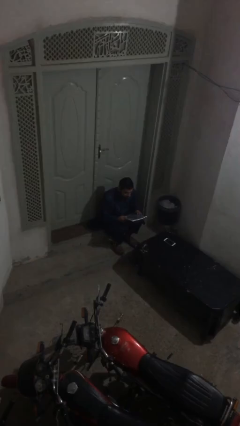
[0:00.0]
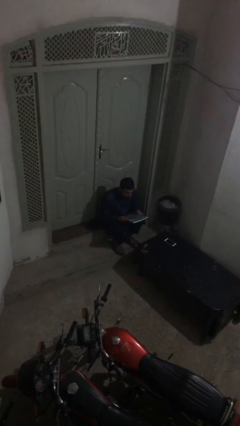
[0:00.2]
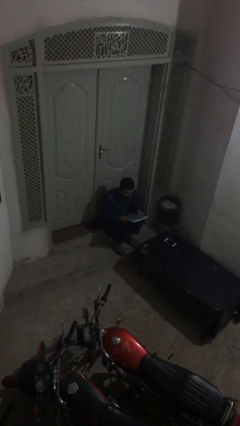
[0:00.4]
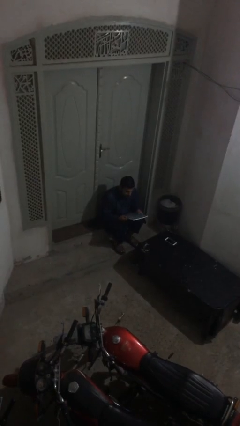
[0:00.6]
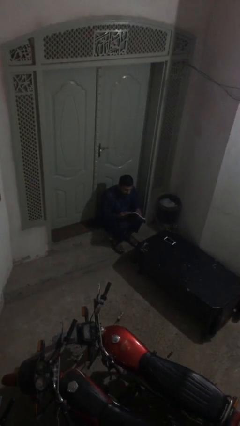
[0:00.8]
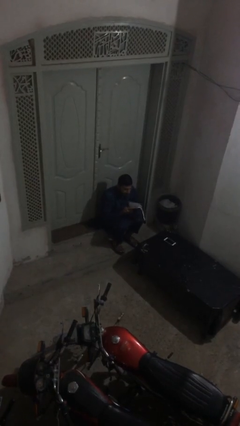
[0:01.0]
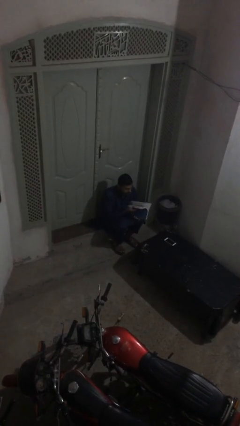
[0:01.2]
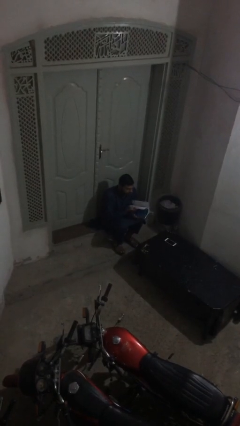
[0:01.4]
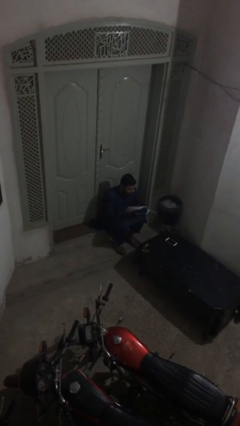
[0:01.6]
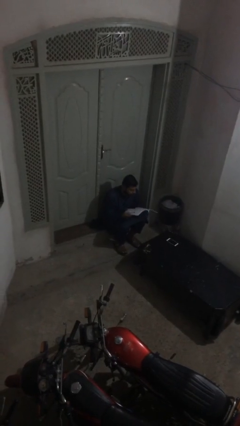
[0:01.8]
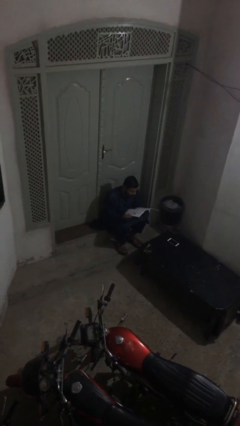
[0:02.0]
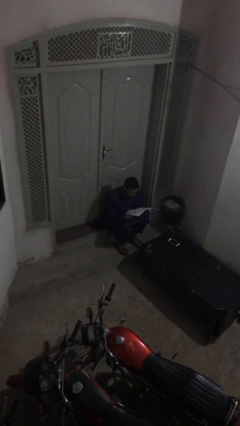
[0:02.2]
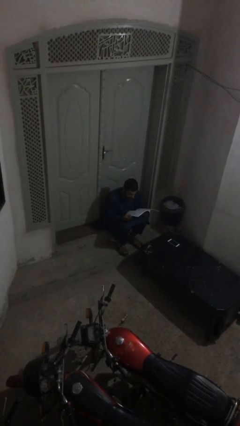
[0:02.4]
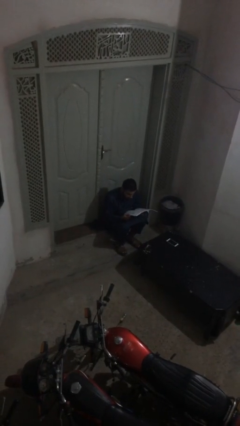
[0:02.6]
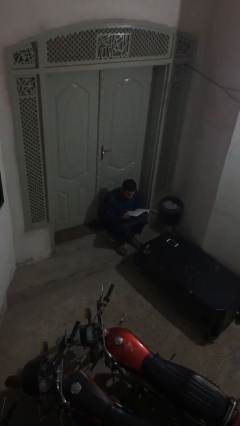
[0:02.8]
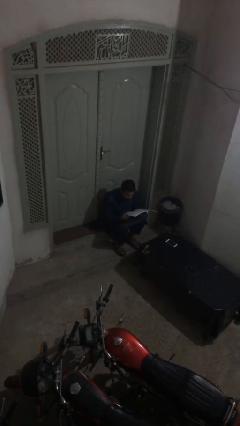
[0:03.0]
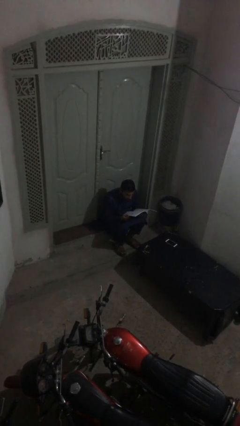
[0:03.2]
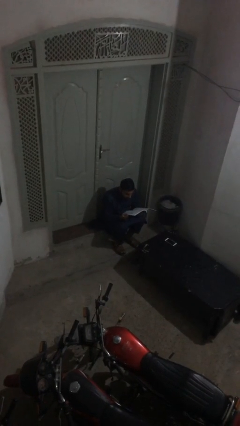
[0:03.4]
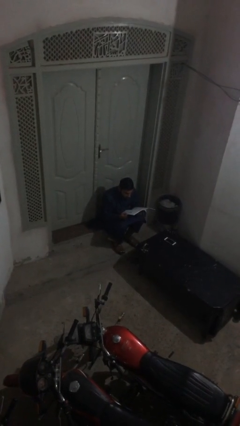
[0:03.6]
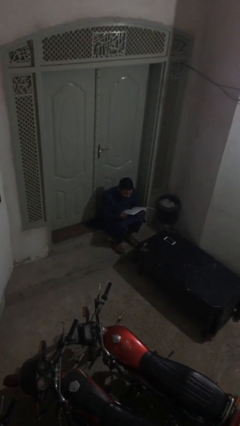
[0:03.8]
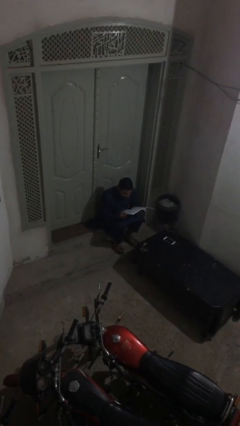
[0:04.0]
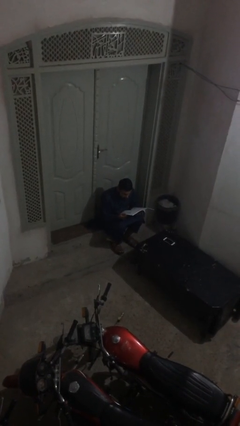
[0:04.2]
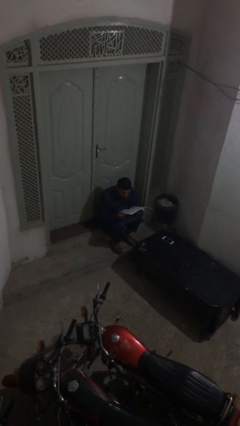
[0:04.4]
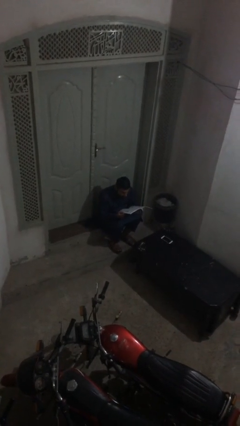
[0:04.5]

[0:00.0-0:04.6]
person reads document

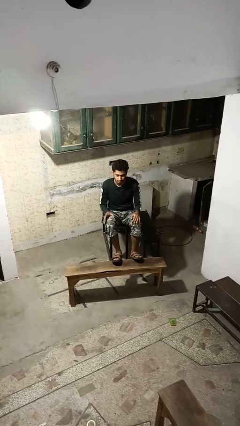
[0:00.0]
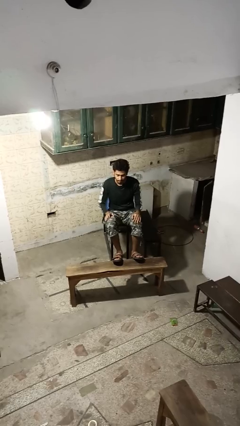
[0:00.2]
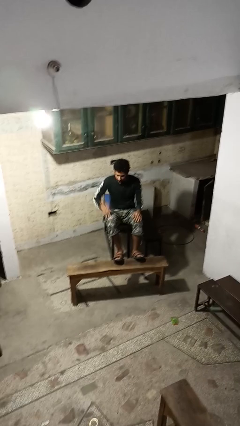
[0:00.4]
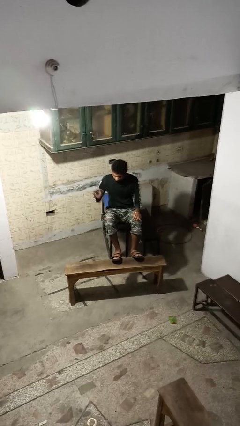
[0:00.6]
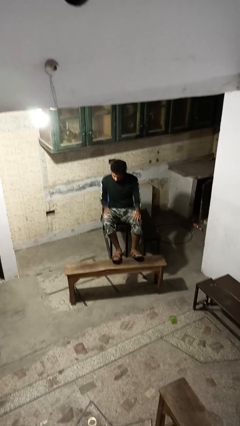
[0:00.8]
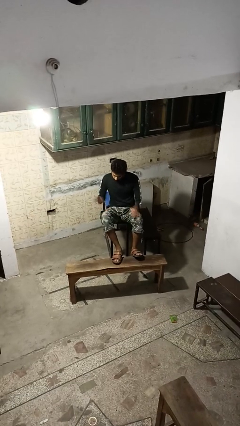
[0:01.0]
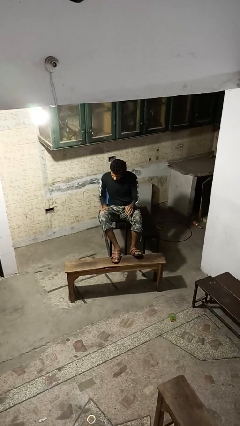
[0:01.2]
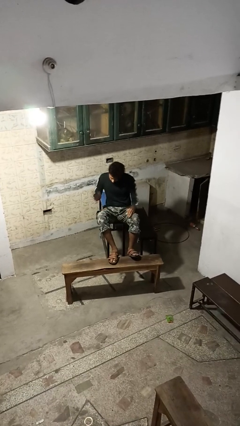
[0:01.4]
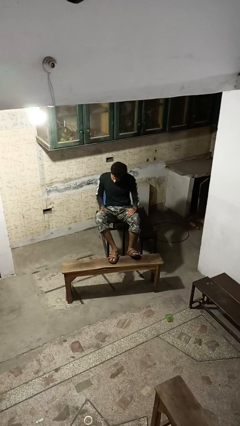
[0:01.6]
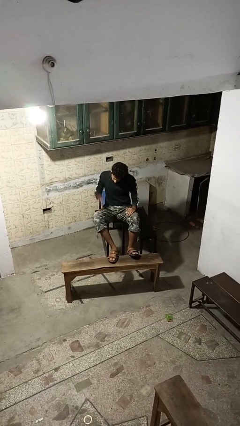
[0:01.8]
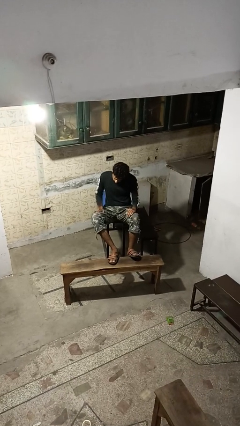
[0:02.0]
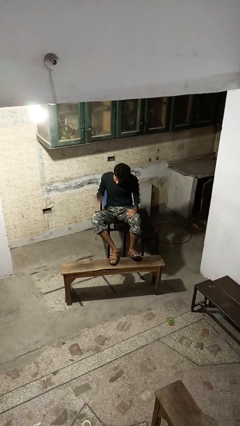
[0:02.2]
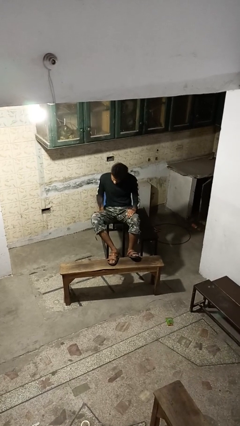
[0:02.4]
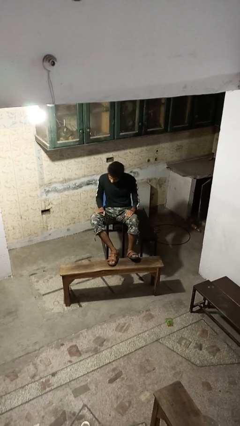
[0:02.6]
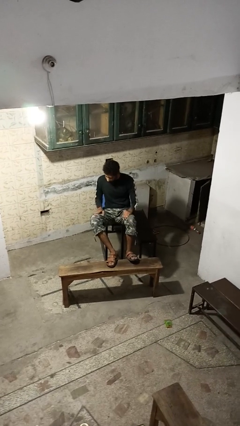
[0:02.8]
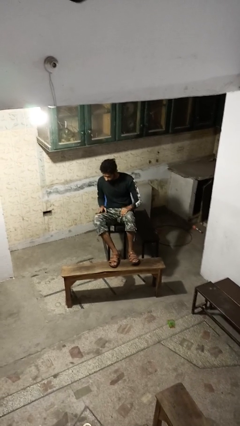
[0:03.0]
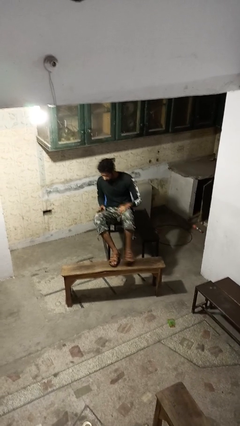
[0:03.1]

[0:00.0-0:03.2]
person slaps hands on thighs

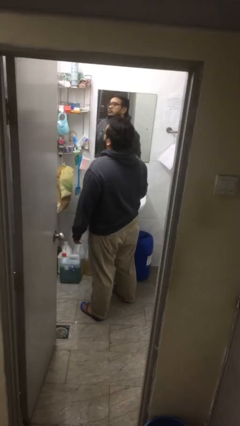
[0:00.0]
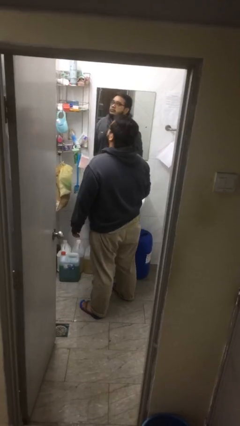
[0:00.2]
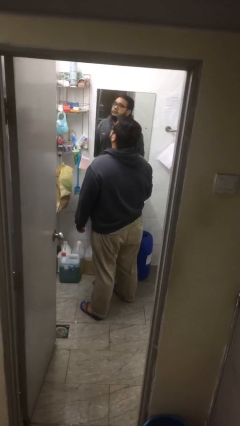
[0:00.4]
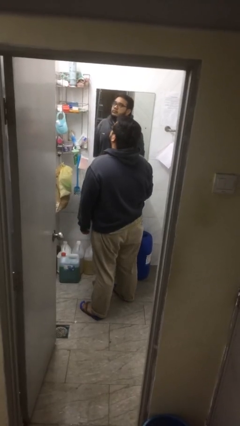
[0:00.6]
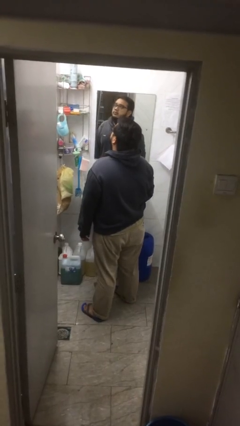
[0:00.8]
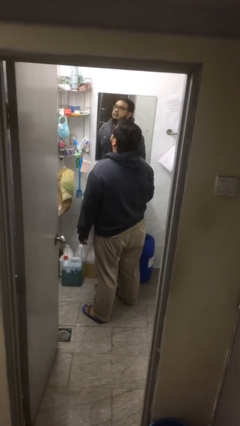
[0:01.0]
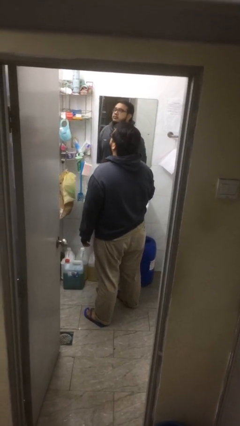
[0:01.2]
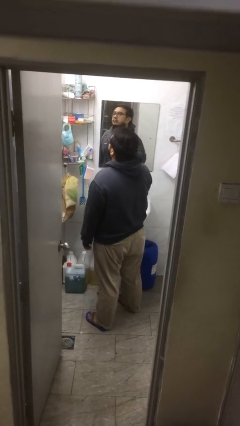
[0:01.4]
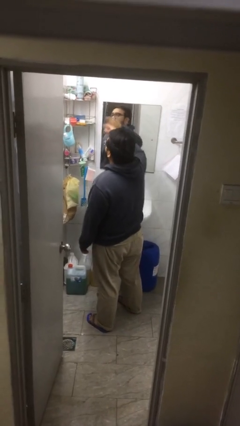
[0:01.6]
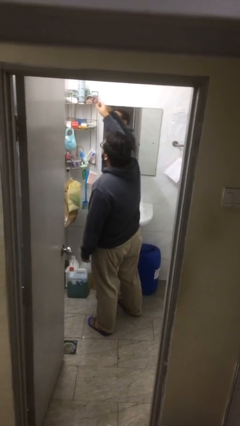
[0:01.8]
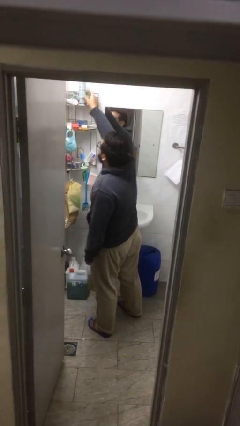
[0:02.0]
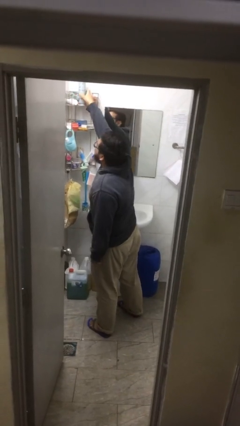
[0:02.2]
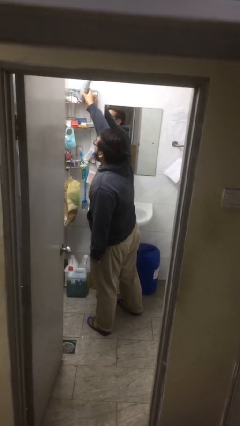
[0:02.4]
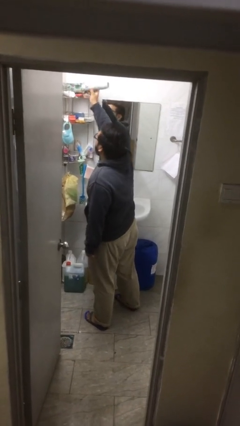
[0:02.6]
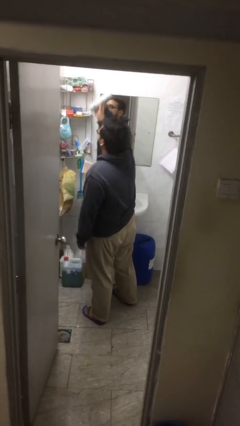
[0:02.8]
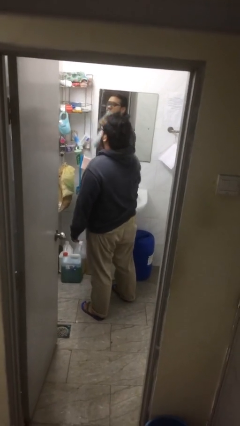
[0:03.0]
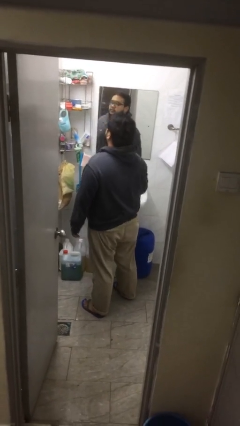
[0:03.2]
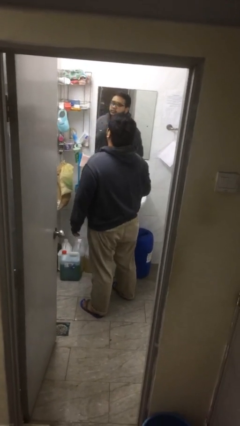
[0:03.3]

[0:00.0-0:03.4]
person picks up object from countertop

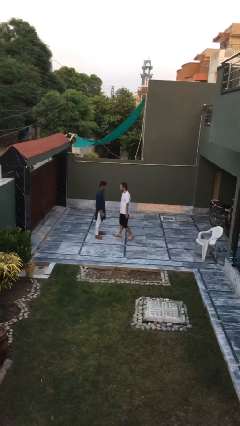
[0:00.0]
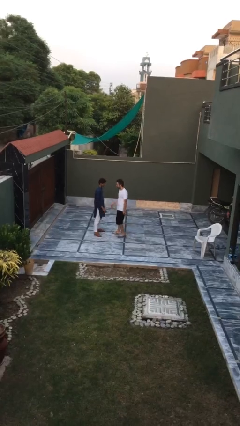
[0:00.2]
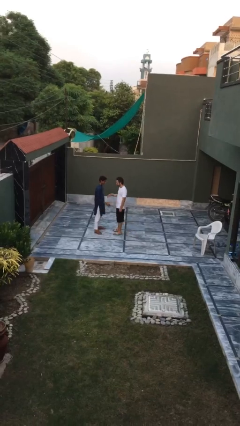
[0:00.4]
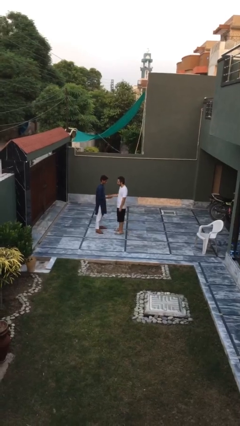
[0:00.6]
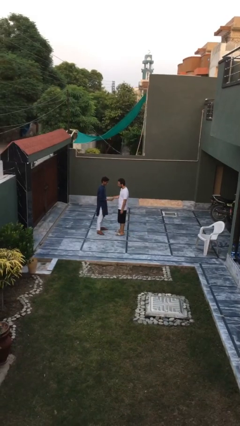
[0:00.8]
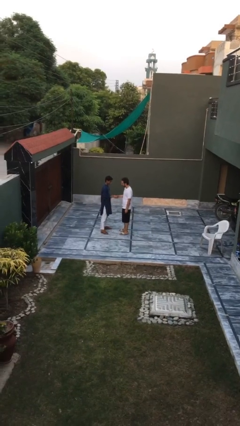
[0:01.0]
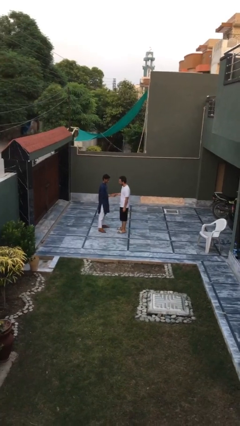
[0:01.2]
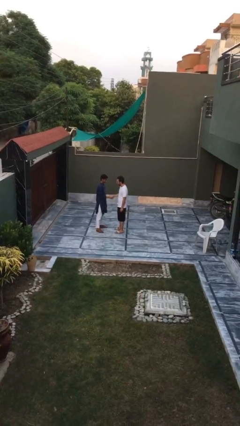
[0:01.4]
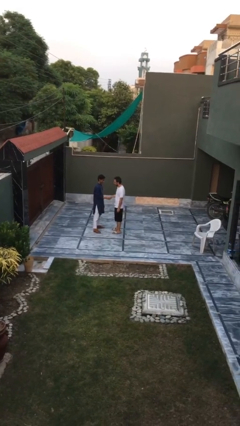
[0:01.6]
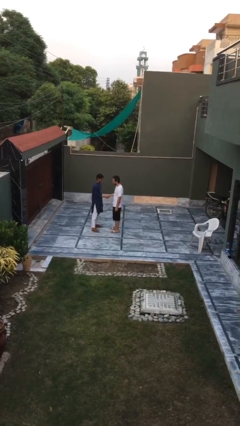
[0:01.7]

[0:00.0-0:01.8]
person shakes hand

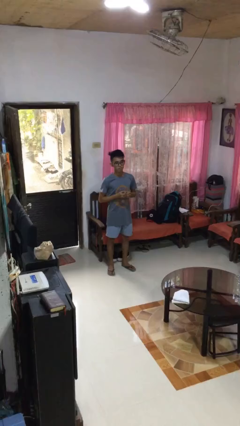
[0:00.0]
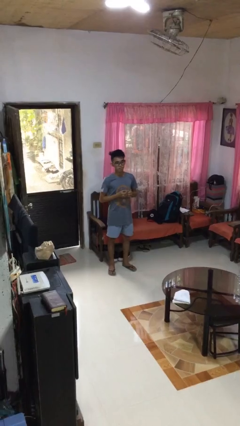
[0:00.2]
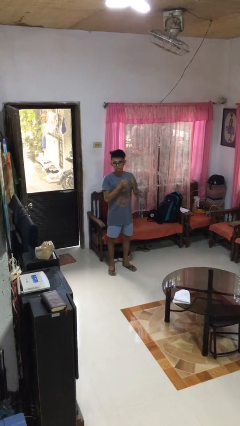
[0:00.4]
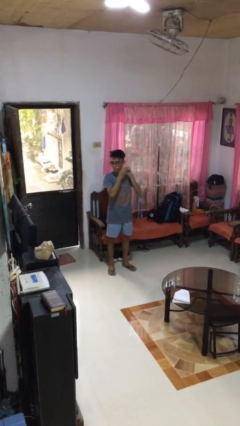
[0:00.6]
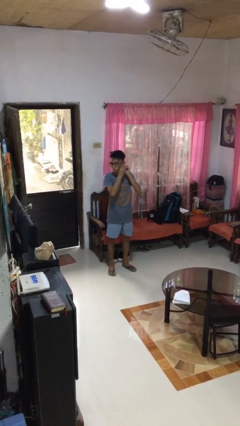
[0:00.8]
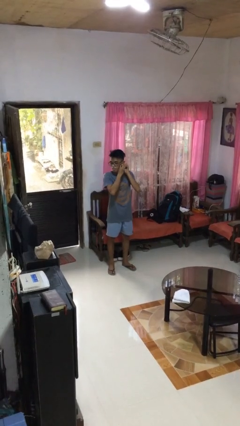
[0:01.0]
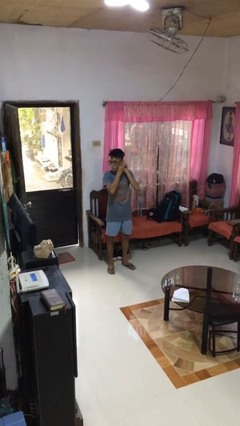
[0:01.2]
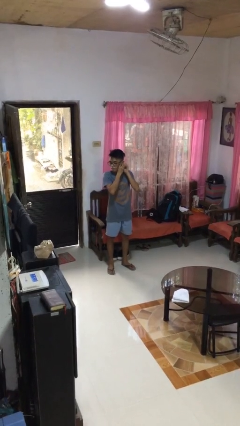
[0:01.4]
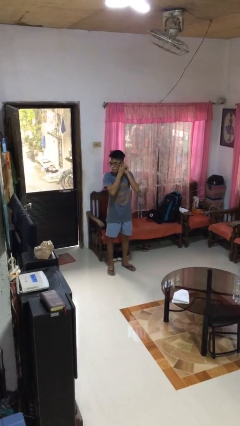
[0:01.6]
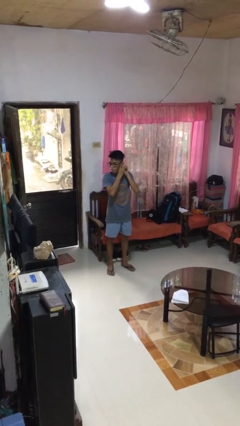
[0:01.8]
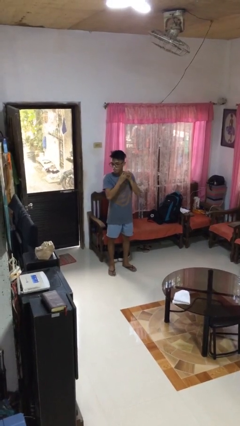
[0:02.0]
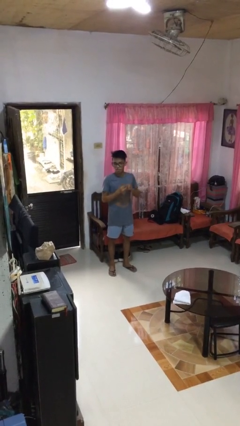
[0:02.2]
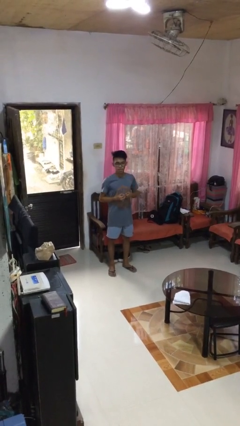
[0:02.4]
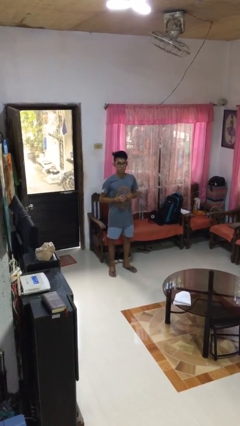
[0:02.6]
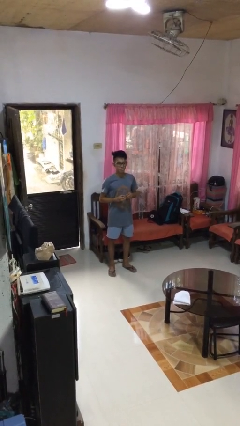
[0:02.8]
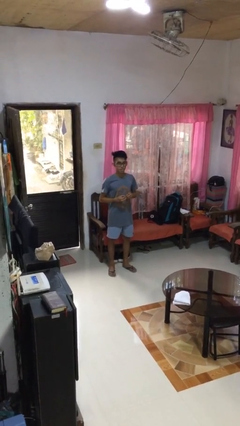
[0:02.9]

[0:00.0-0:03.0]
person takes off earrings

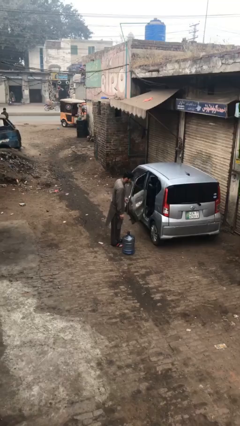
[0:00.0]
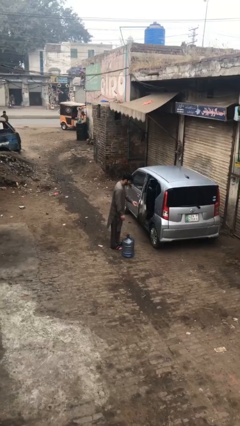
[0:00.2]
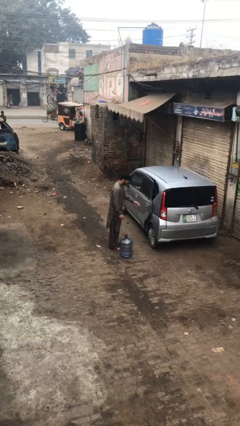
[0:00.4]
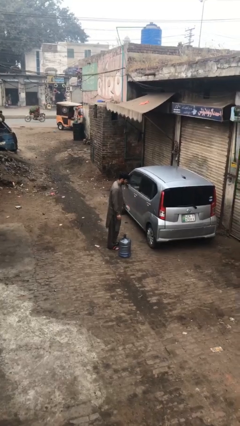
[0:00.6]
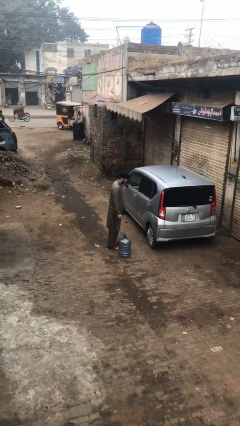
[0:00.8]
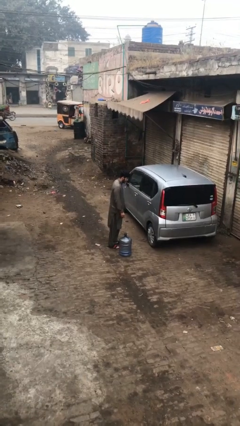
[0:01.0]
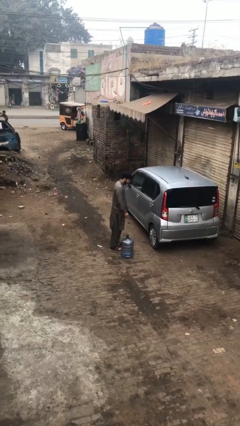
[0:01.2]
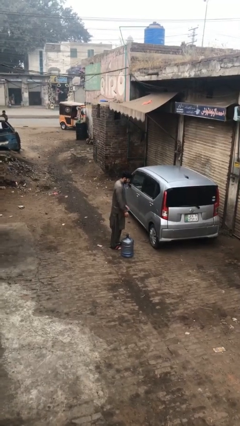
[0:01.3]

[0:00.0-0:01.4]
person closes car door
